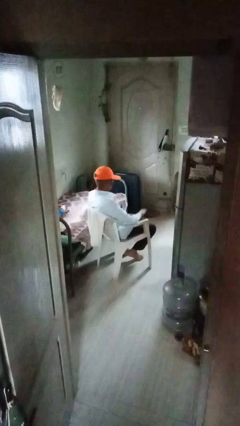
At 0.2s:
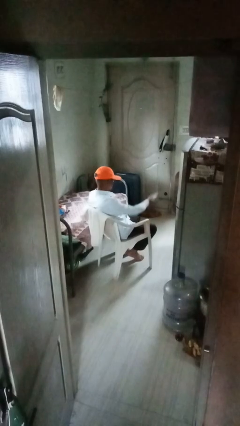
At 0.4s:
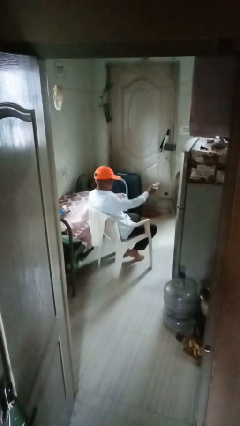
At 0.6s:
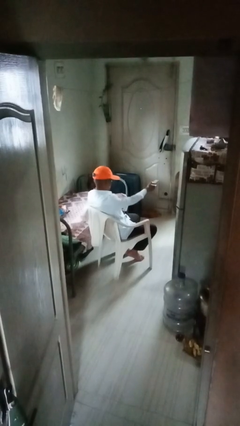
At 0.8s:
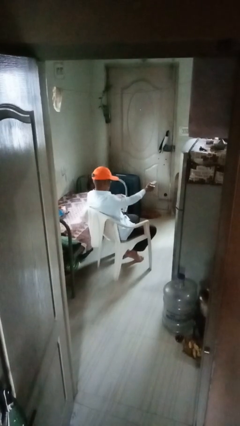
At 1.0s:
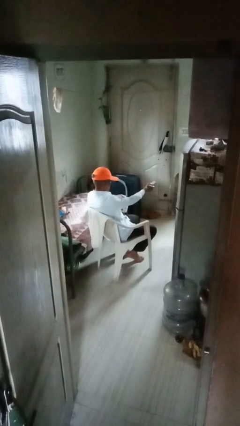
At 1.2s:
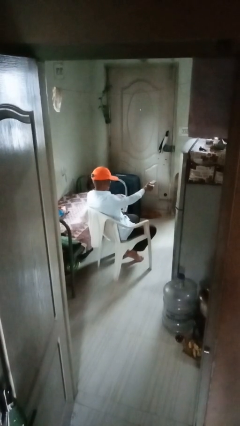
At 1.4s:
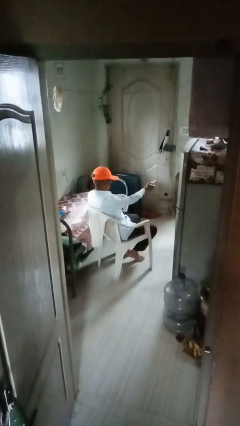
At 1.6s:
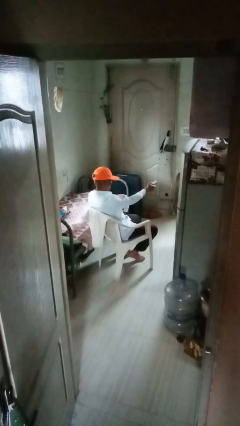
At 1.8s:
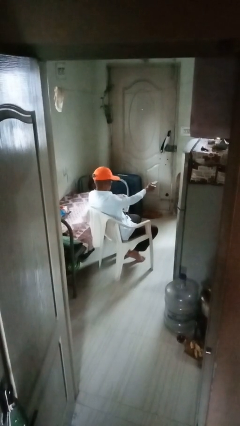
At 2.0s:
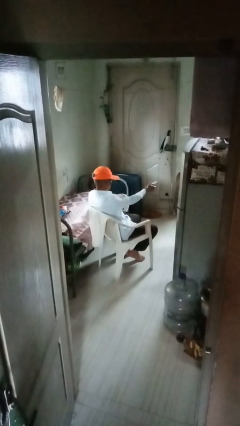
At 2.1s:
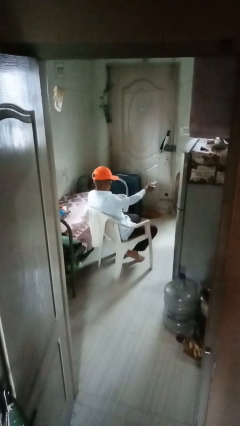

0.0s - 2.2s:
person uses television remote

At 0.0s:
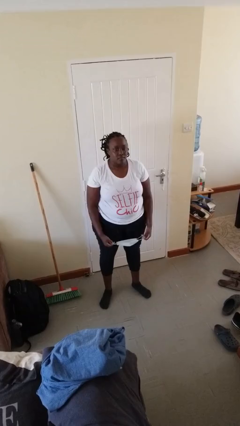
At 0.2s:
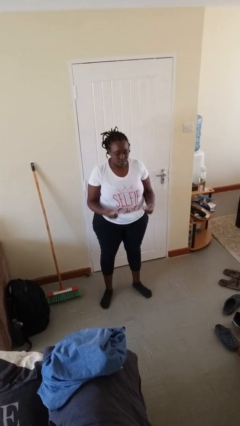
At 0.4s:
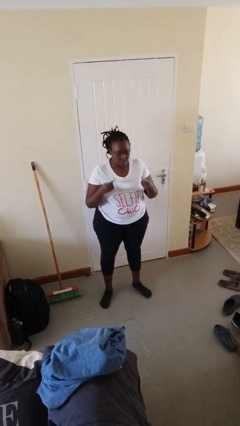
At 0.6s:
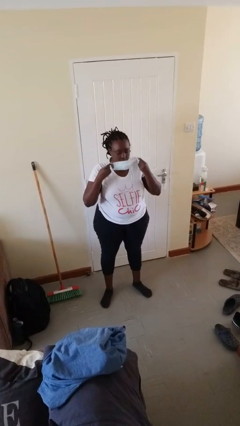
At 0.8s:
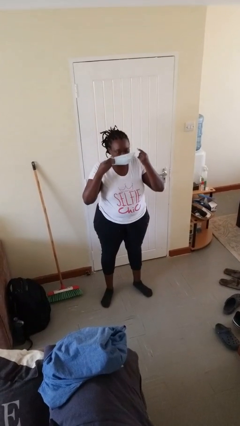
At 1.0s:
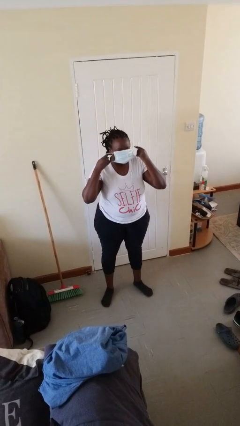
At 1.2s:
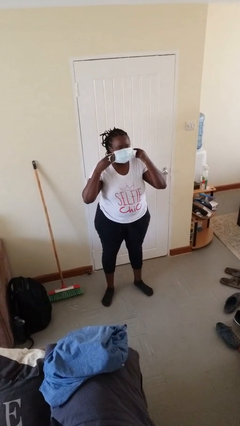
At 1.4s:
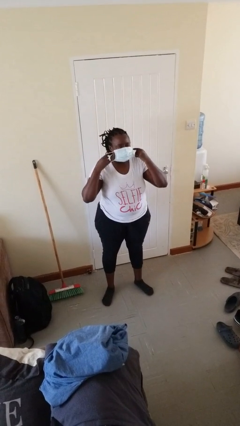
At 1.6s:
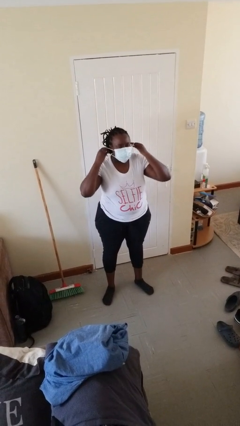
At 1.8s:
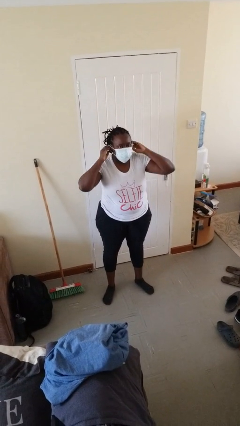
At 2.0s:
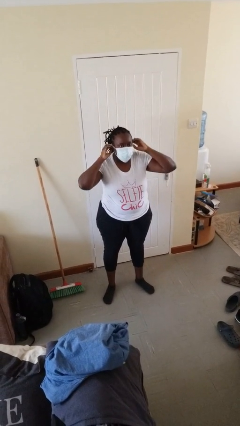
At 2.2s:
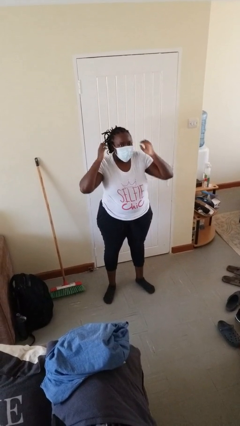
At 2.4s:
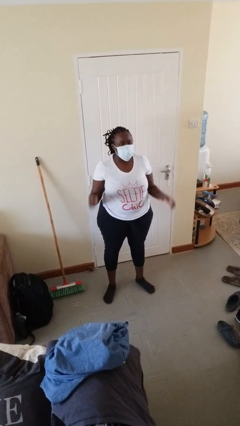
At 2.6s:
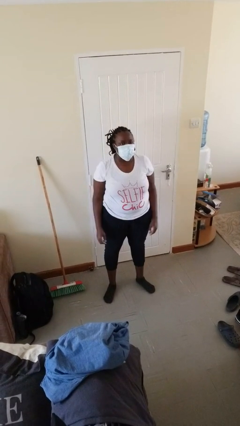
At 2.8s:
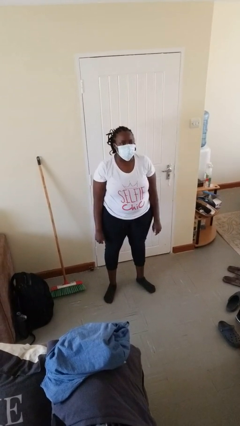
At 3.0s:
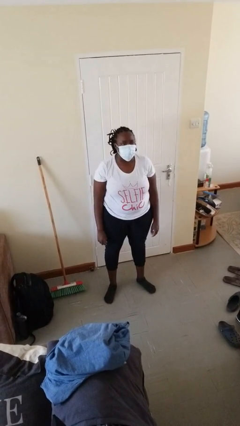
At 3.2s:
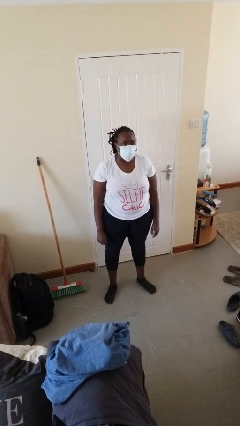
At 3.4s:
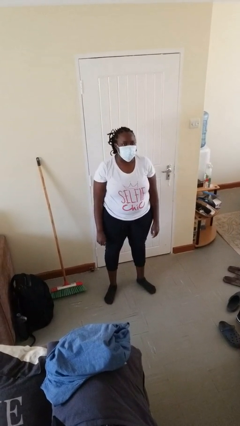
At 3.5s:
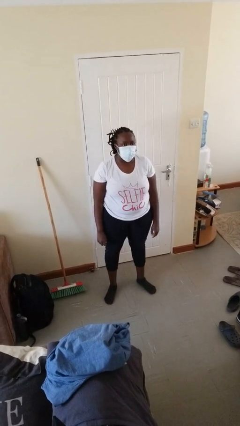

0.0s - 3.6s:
person puts on facemask

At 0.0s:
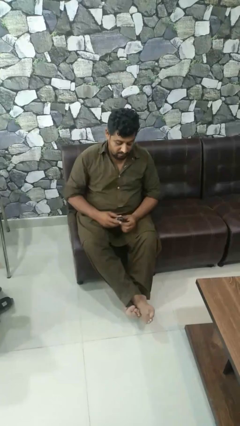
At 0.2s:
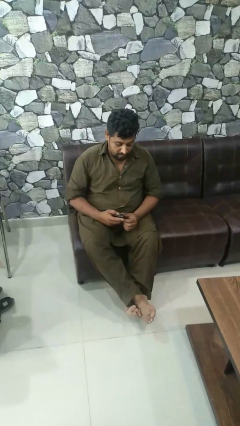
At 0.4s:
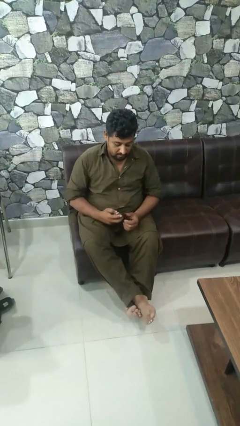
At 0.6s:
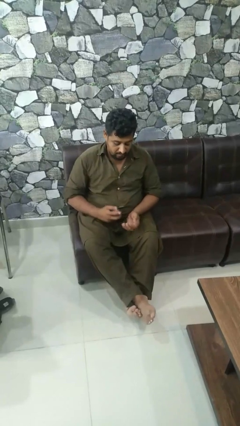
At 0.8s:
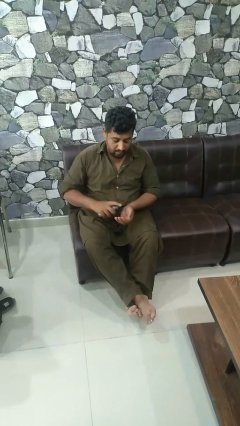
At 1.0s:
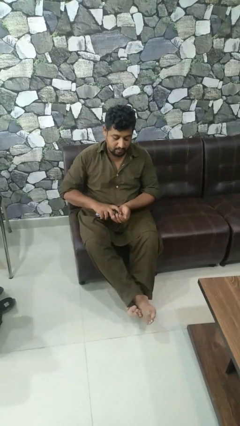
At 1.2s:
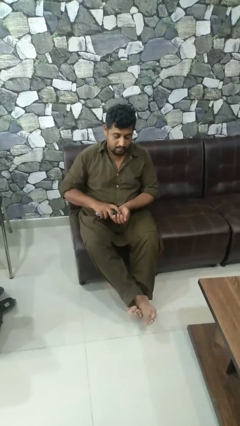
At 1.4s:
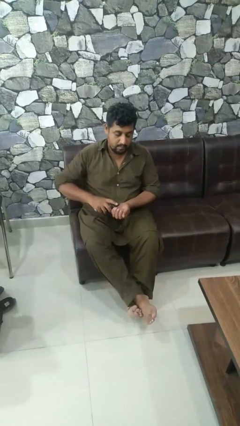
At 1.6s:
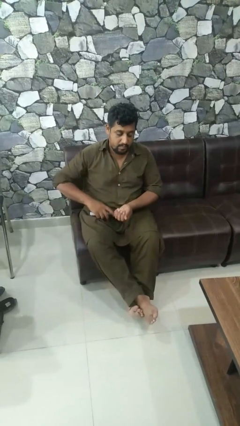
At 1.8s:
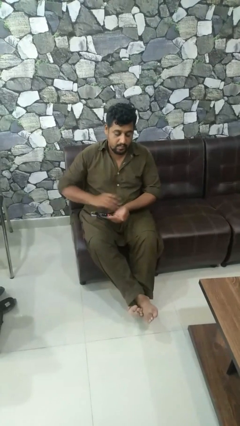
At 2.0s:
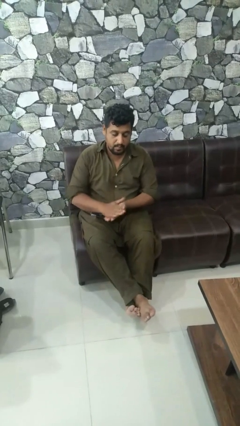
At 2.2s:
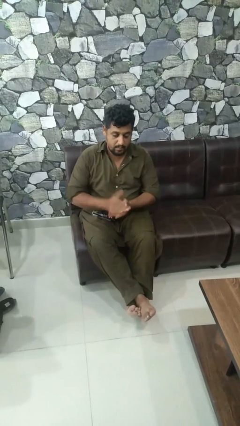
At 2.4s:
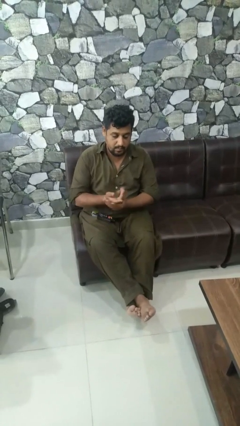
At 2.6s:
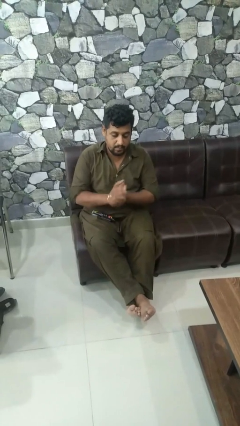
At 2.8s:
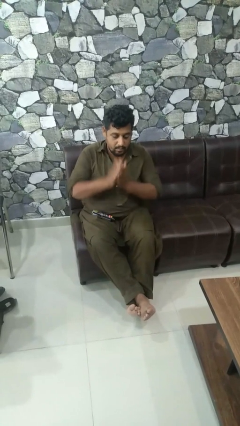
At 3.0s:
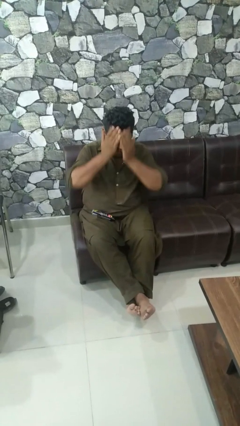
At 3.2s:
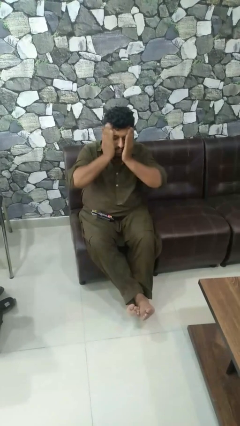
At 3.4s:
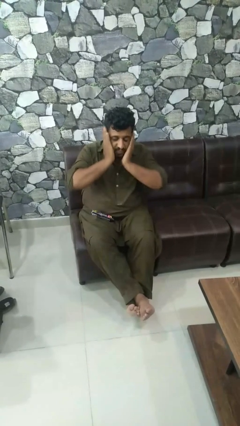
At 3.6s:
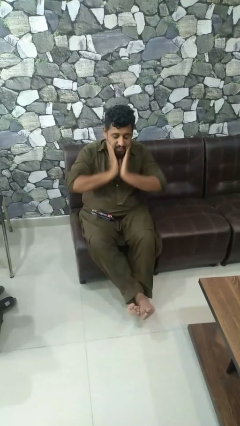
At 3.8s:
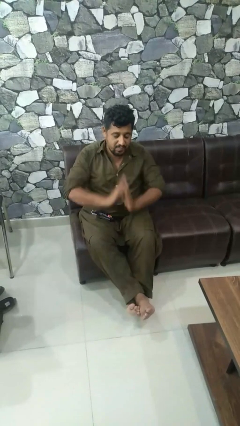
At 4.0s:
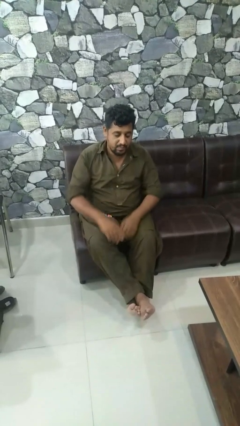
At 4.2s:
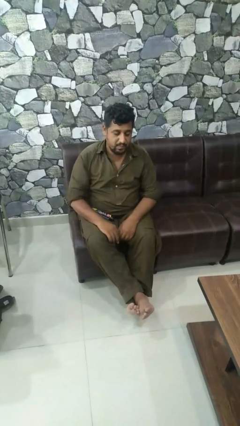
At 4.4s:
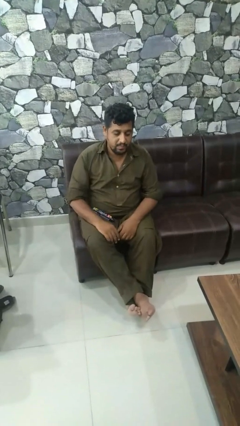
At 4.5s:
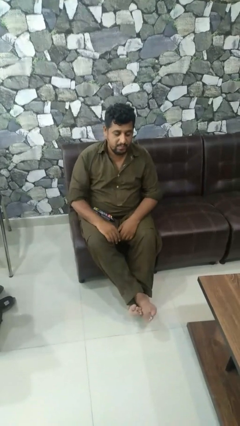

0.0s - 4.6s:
person applies sunscreen

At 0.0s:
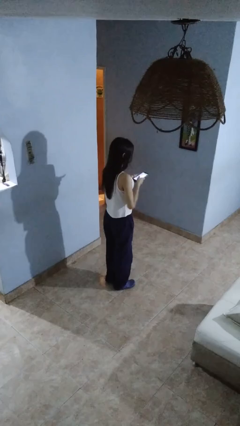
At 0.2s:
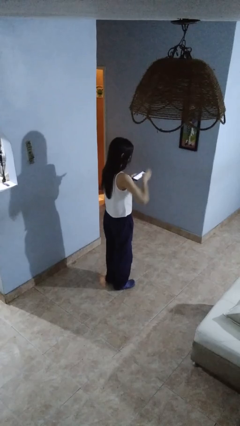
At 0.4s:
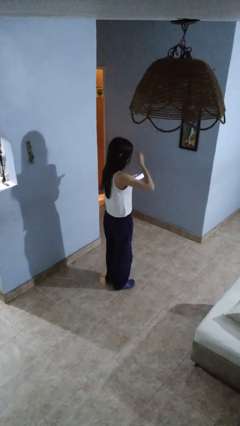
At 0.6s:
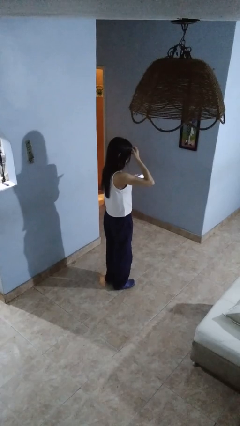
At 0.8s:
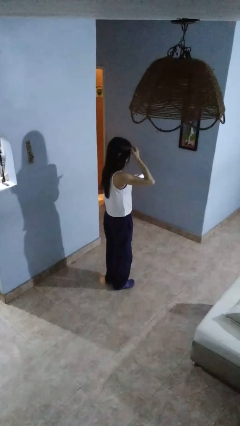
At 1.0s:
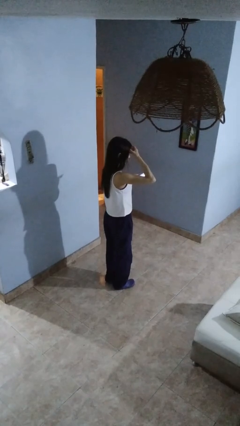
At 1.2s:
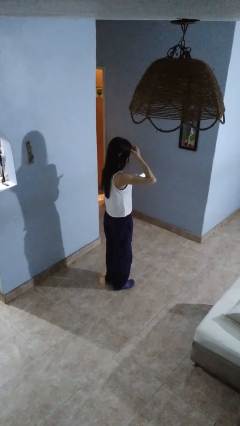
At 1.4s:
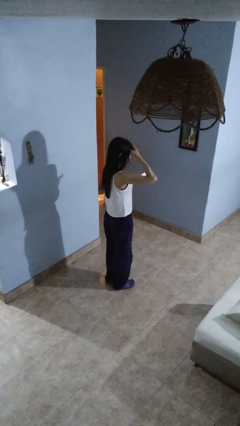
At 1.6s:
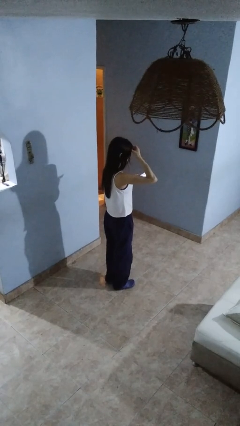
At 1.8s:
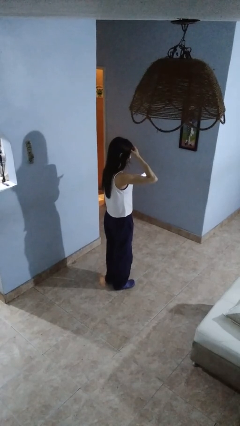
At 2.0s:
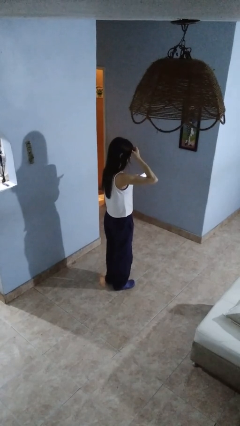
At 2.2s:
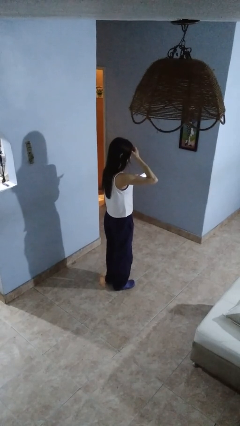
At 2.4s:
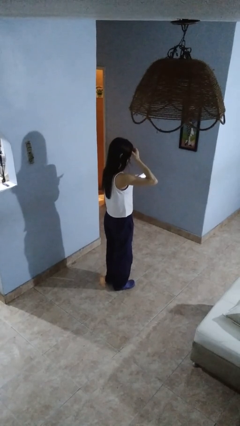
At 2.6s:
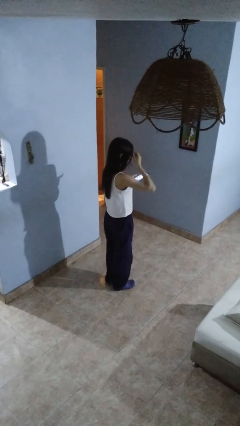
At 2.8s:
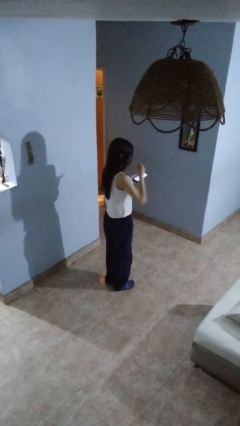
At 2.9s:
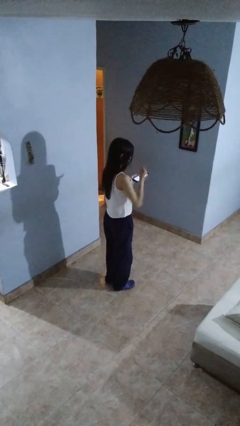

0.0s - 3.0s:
person scratches face

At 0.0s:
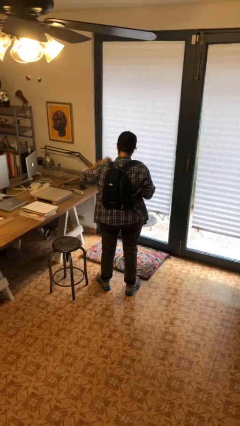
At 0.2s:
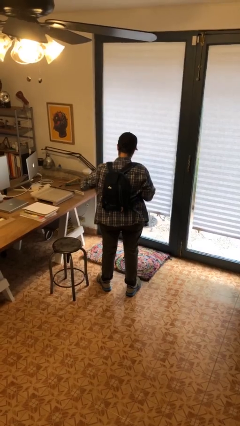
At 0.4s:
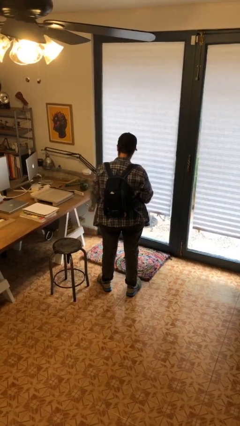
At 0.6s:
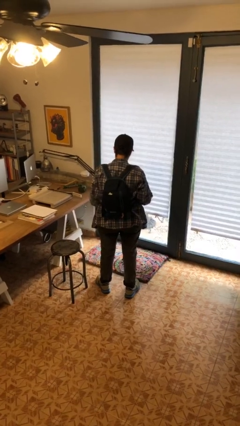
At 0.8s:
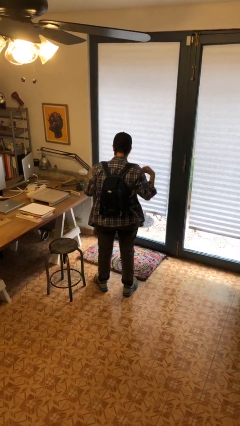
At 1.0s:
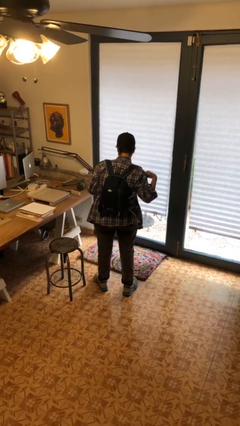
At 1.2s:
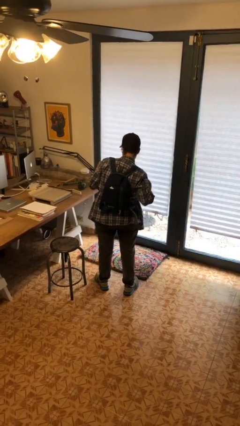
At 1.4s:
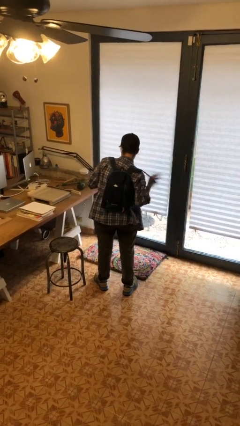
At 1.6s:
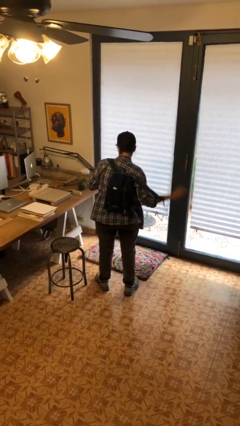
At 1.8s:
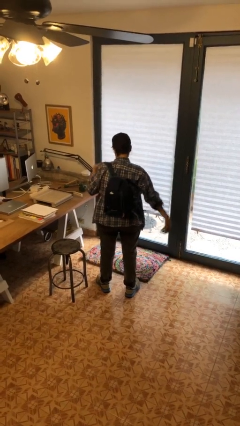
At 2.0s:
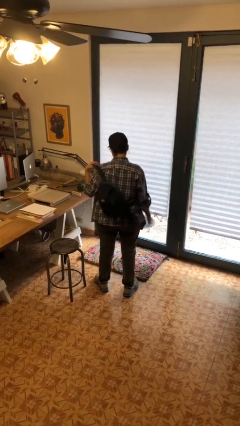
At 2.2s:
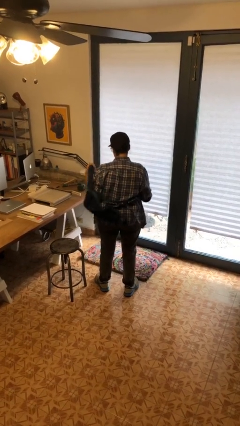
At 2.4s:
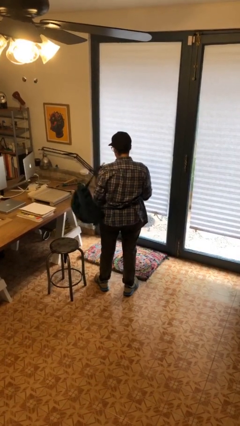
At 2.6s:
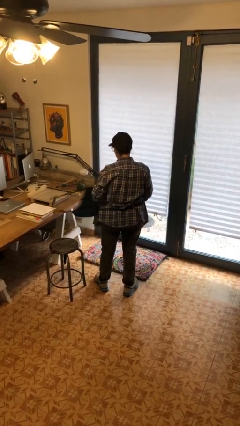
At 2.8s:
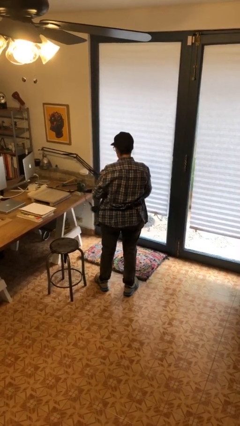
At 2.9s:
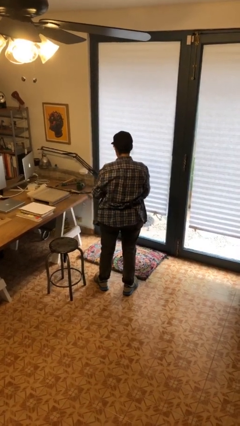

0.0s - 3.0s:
person takes off backpack

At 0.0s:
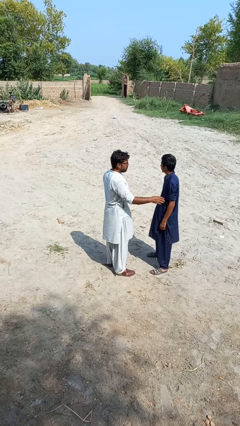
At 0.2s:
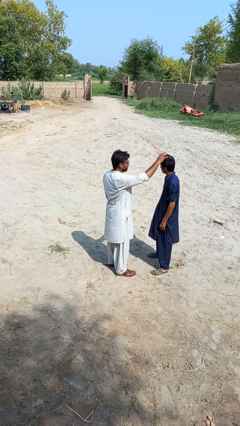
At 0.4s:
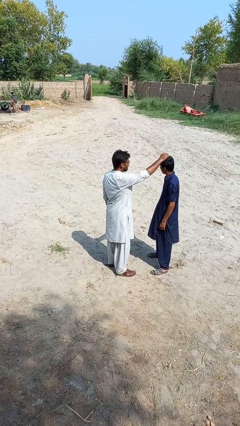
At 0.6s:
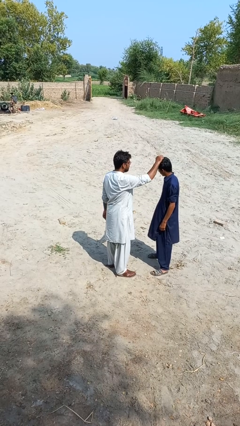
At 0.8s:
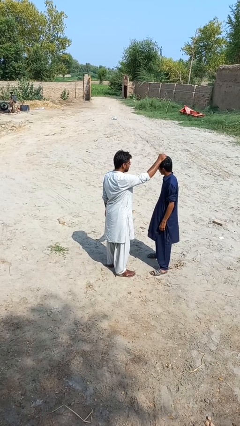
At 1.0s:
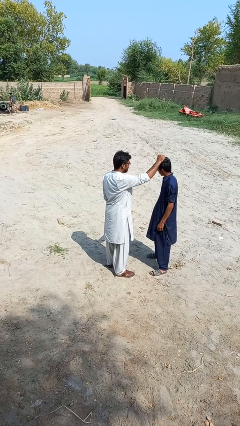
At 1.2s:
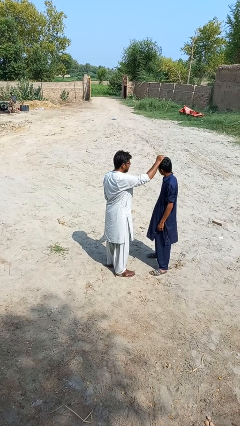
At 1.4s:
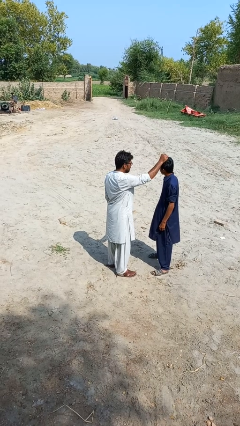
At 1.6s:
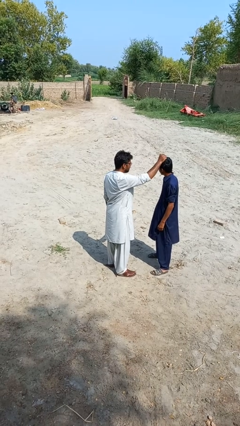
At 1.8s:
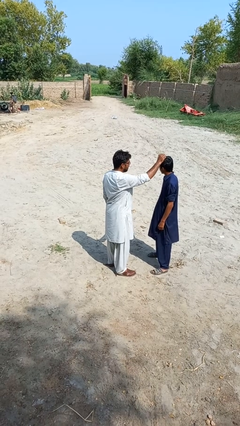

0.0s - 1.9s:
person grabs person by hair
